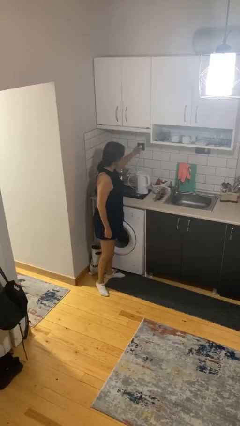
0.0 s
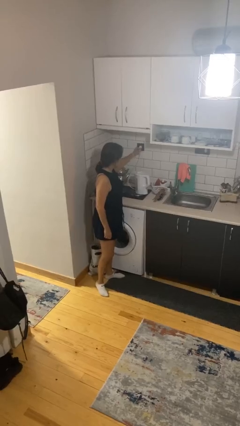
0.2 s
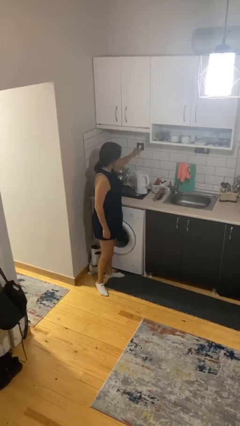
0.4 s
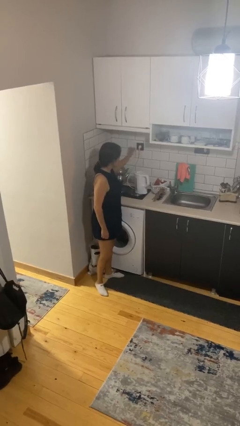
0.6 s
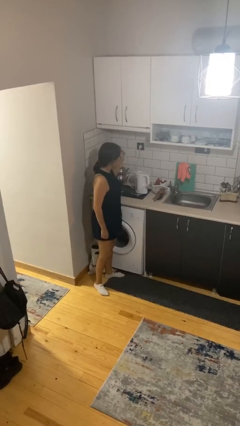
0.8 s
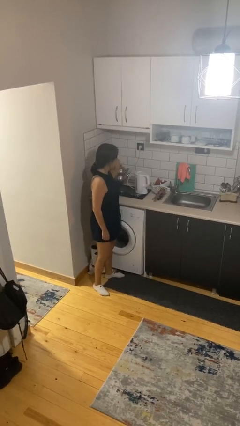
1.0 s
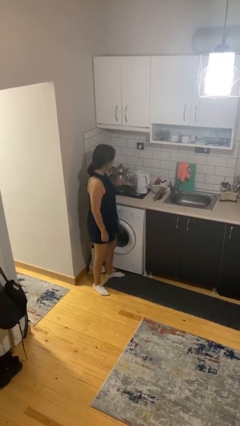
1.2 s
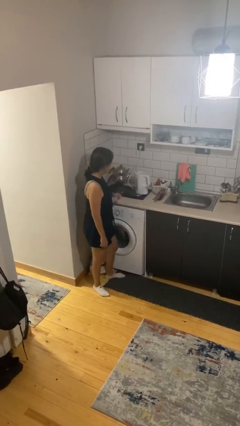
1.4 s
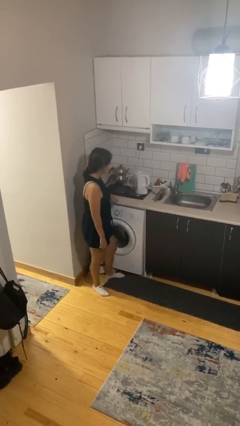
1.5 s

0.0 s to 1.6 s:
person plugs into electrical socket

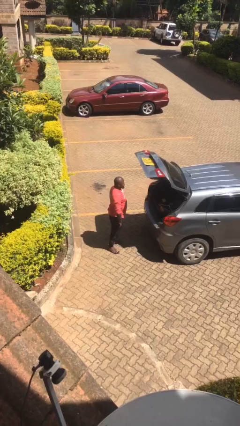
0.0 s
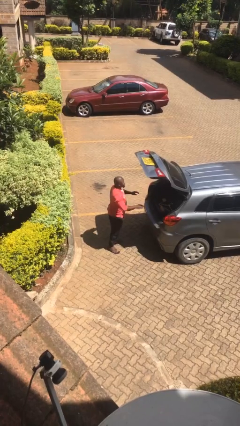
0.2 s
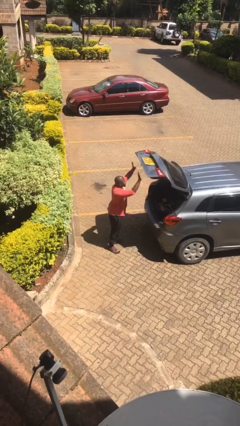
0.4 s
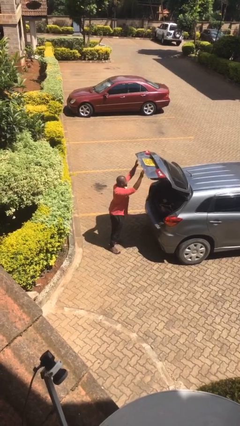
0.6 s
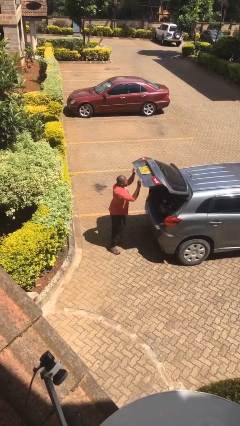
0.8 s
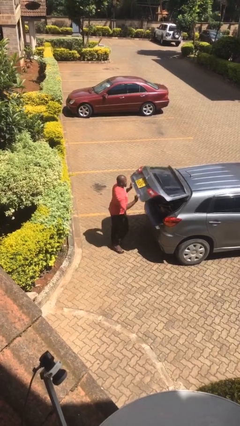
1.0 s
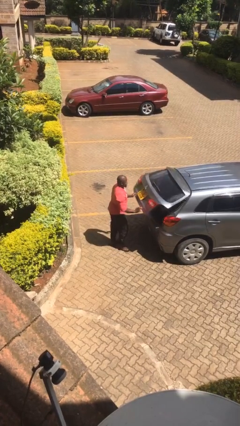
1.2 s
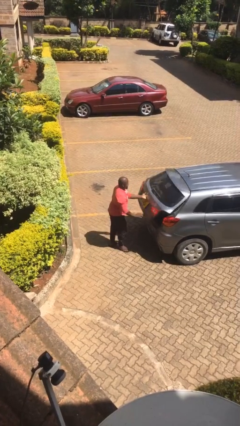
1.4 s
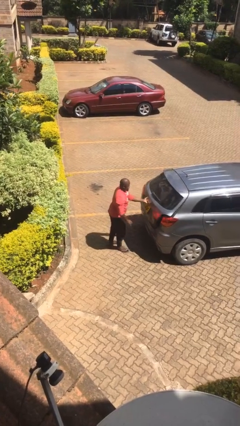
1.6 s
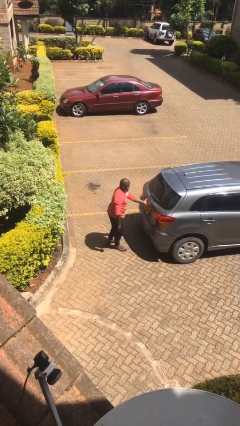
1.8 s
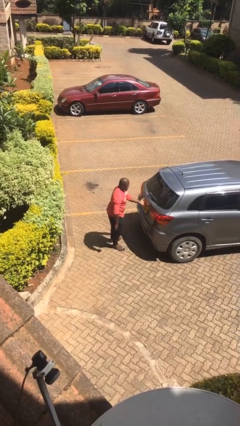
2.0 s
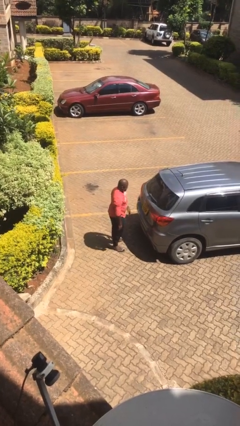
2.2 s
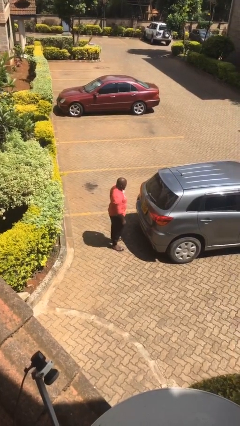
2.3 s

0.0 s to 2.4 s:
person closes car trunk

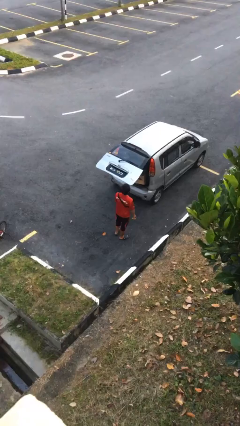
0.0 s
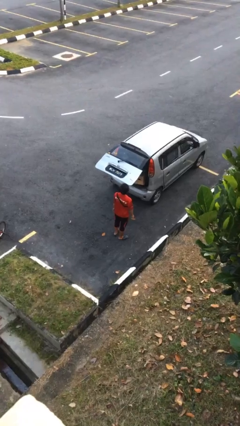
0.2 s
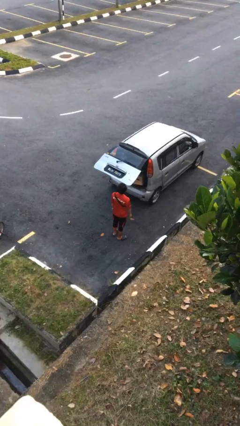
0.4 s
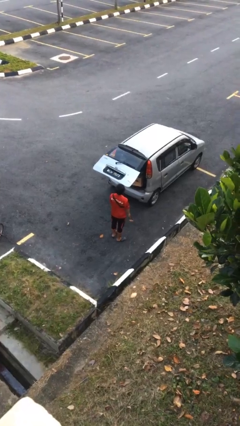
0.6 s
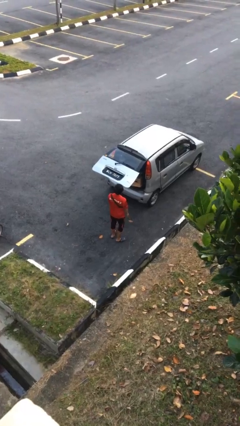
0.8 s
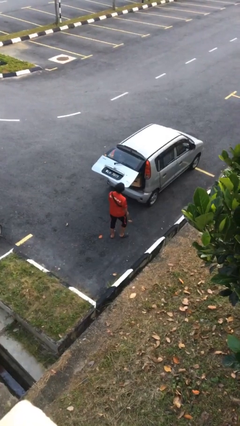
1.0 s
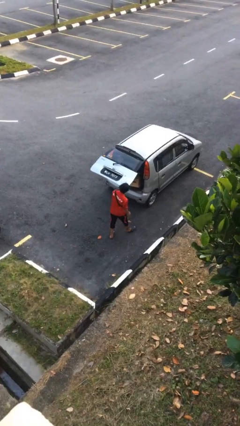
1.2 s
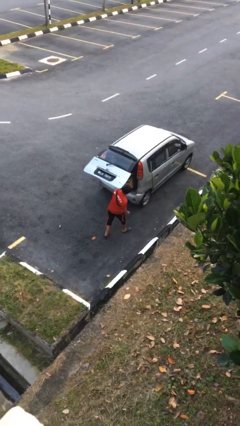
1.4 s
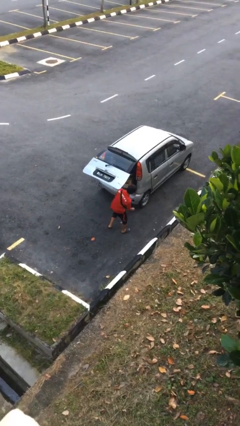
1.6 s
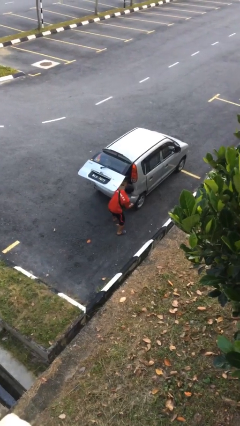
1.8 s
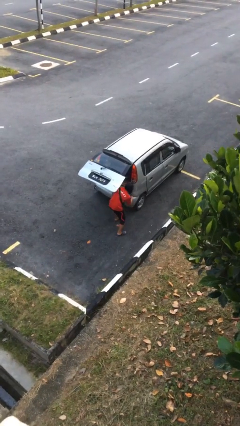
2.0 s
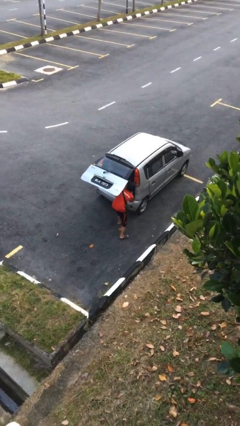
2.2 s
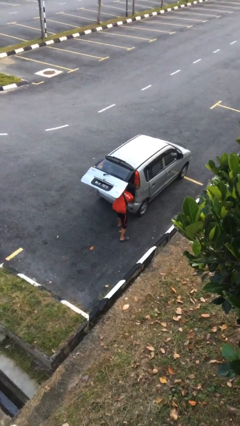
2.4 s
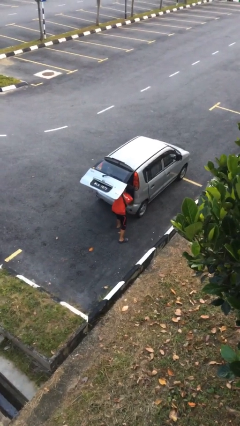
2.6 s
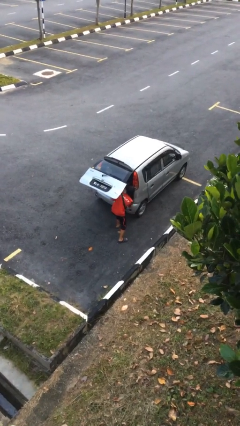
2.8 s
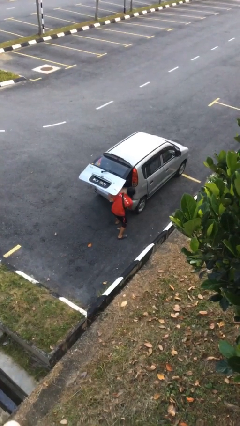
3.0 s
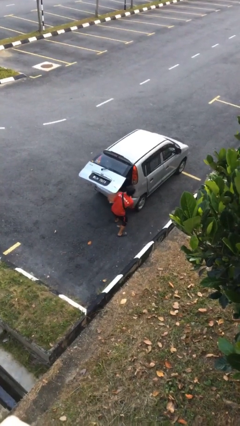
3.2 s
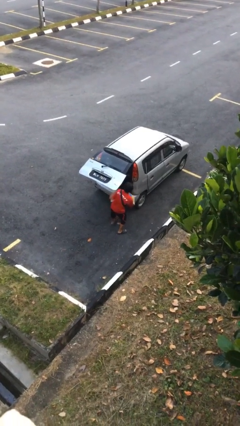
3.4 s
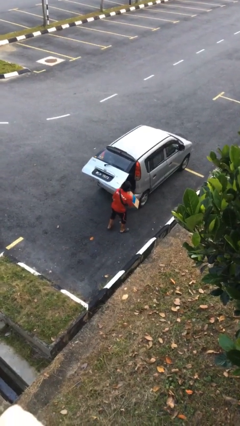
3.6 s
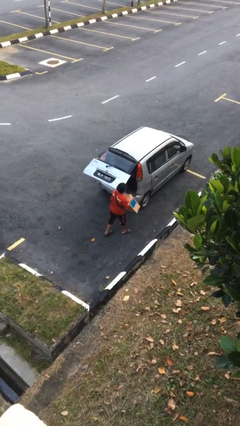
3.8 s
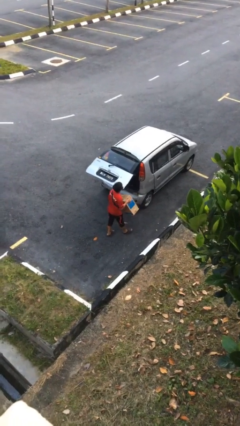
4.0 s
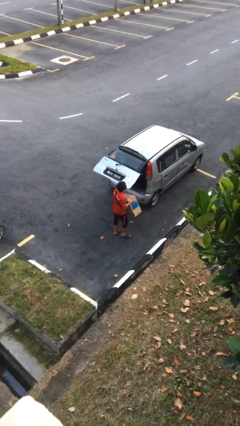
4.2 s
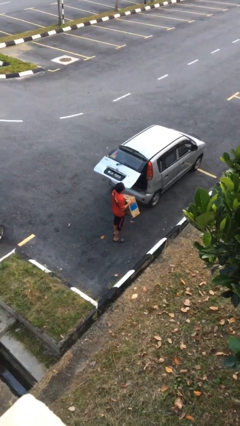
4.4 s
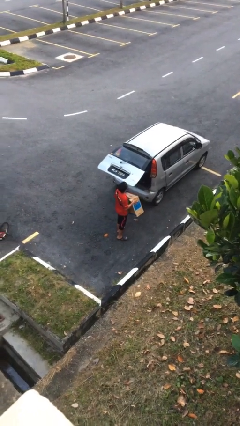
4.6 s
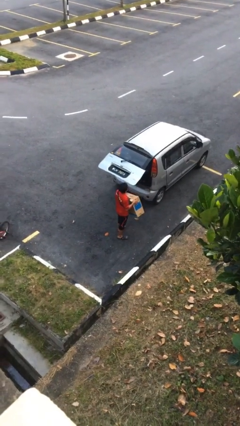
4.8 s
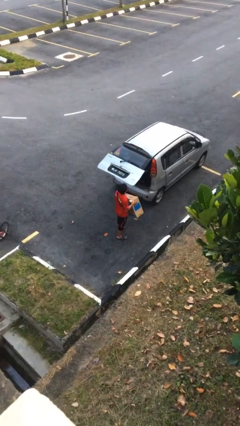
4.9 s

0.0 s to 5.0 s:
person unloads car

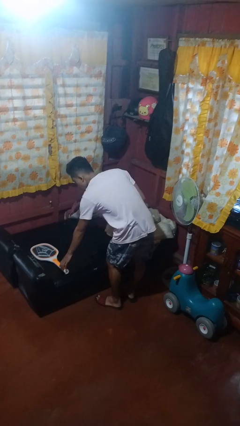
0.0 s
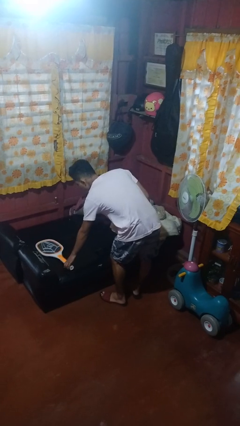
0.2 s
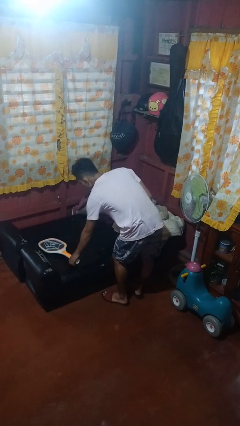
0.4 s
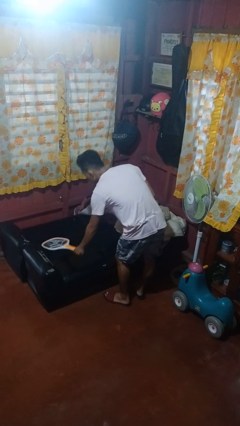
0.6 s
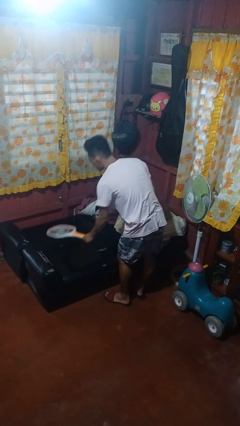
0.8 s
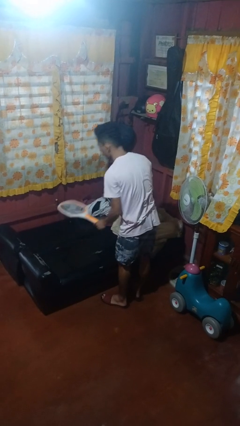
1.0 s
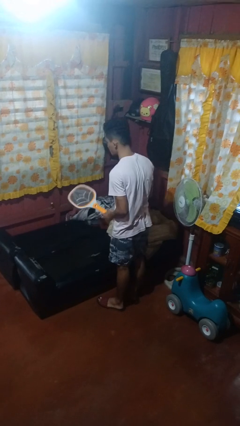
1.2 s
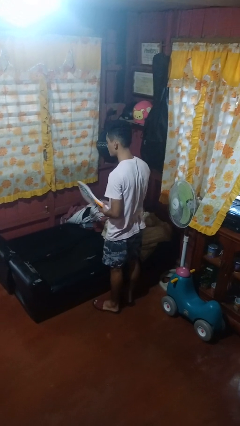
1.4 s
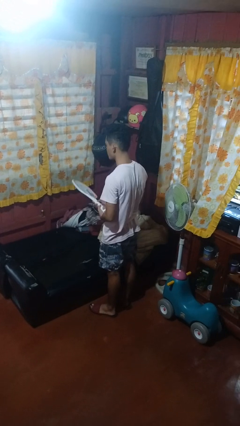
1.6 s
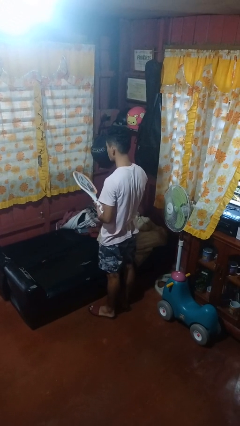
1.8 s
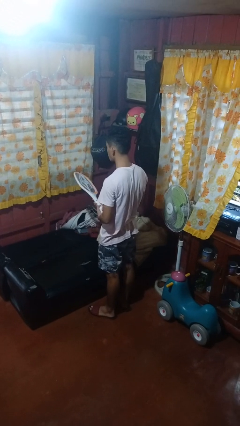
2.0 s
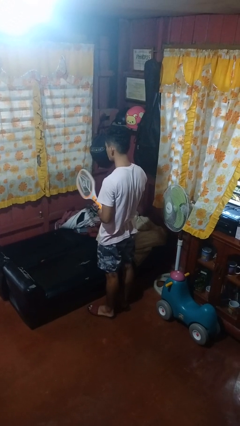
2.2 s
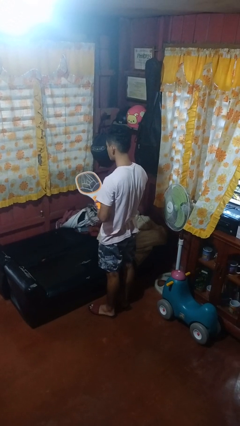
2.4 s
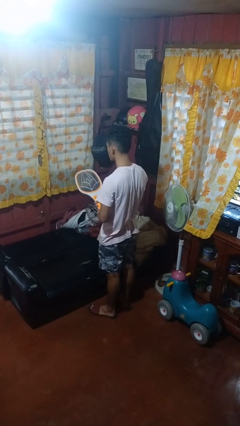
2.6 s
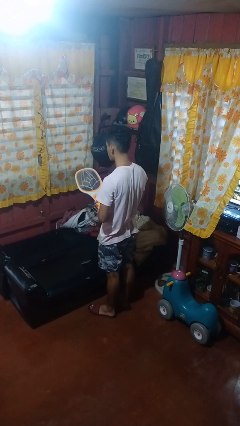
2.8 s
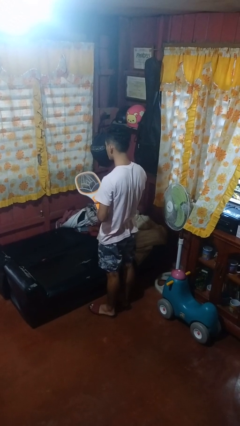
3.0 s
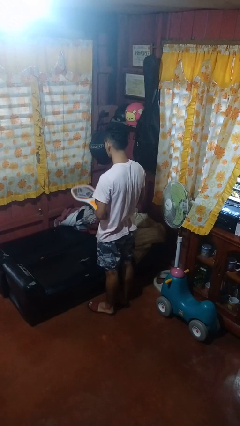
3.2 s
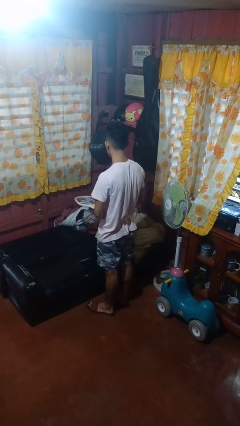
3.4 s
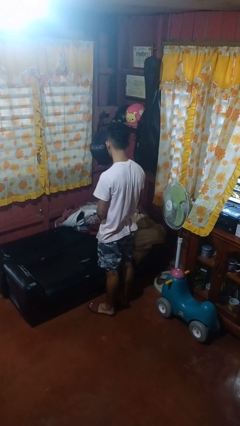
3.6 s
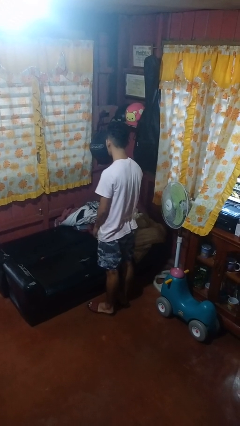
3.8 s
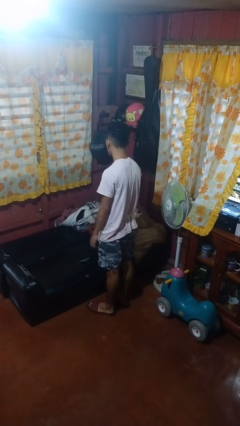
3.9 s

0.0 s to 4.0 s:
person picks up object from couch

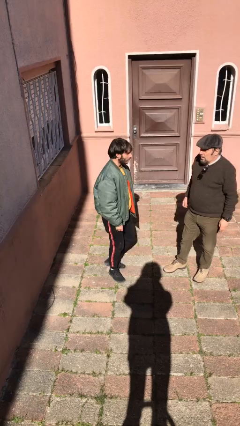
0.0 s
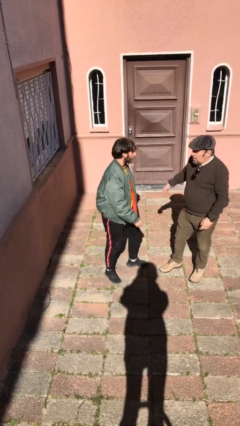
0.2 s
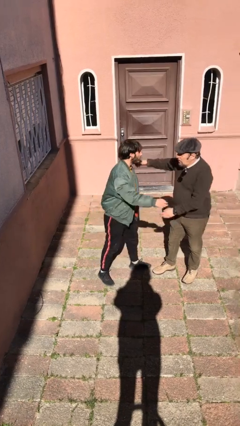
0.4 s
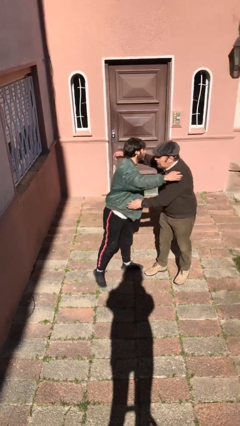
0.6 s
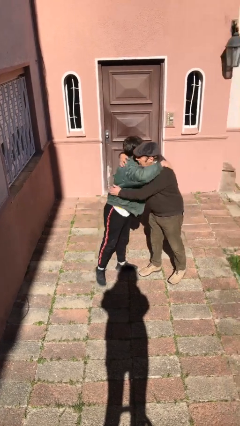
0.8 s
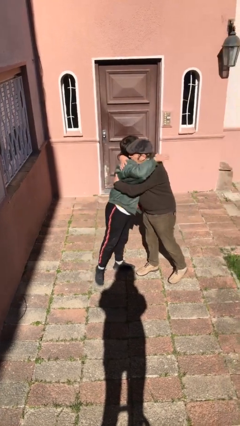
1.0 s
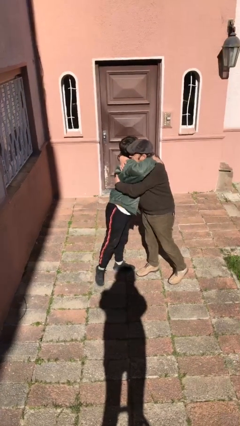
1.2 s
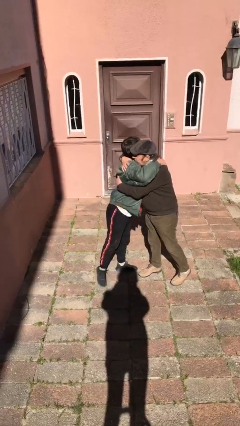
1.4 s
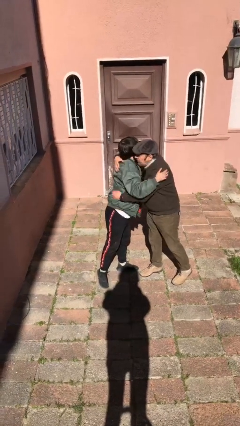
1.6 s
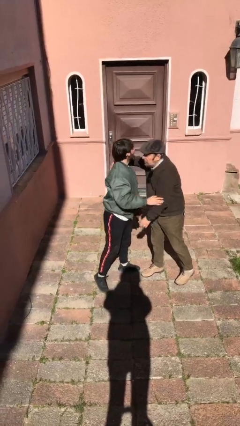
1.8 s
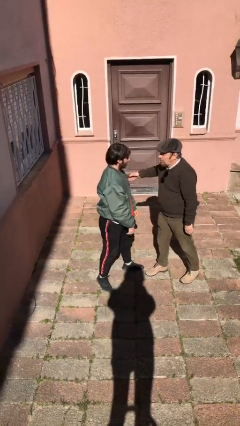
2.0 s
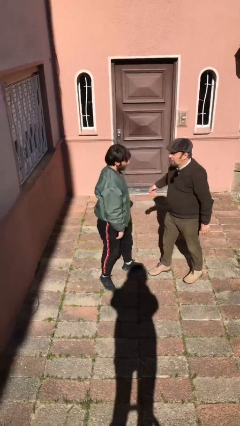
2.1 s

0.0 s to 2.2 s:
person kisses cheek of person

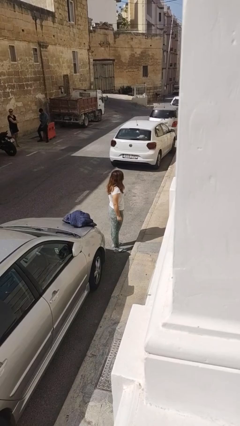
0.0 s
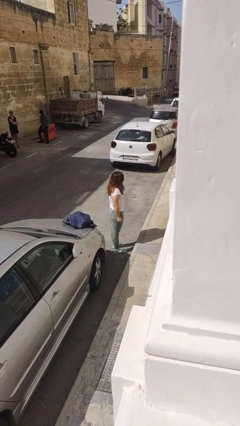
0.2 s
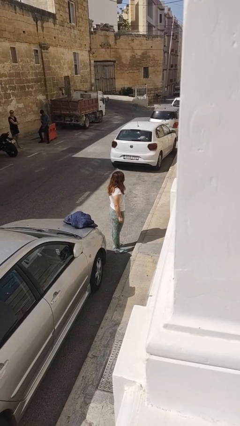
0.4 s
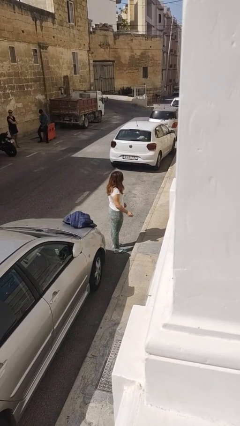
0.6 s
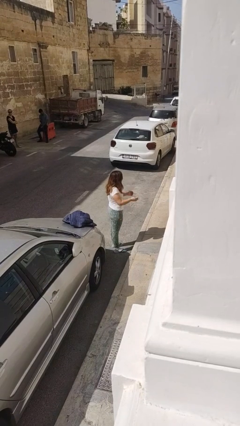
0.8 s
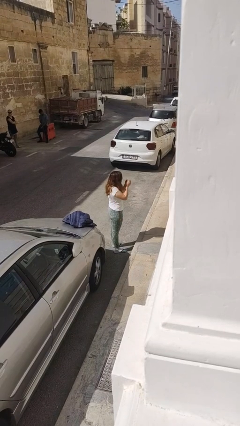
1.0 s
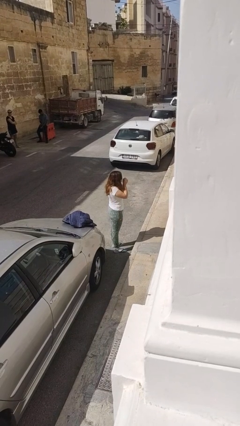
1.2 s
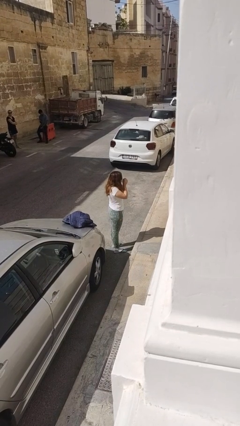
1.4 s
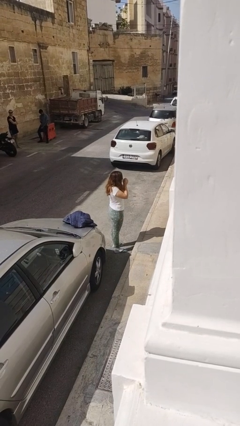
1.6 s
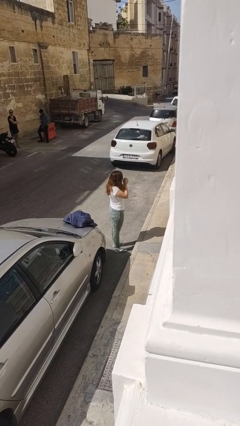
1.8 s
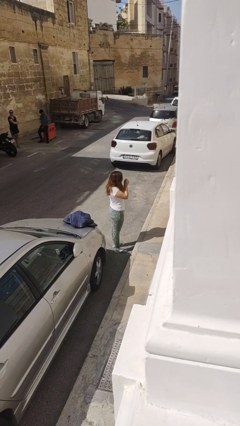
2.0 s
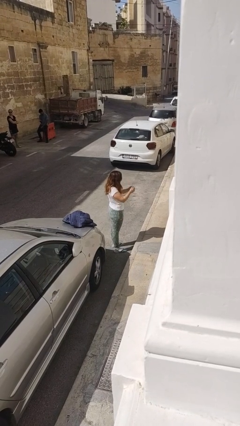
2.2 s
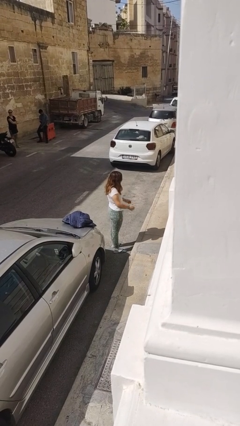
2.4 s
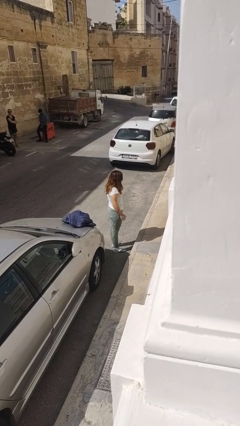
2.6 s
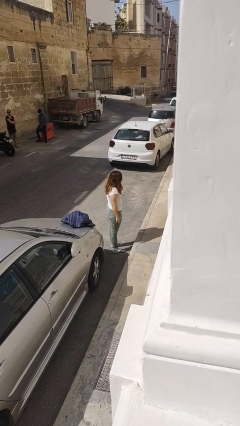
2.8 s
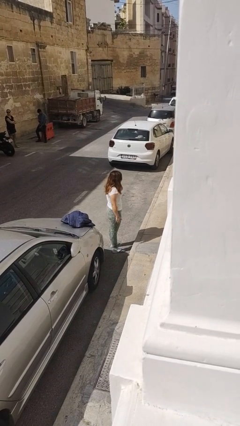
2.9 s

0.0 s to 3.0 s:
person blows into hands
